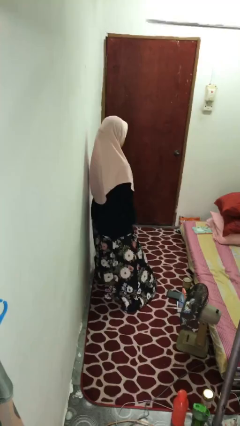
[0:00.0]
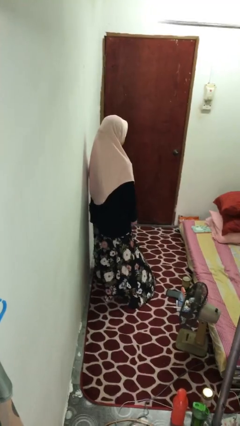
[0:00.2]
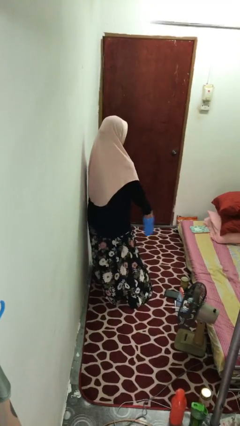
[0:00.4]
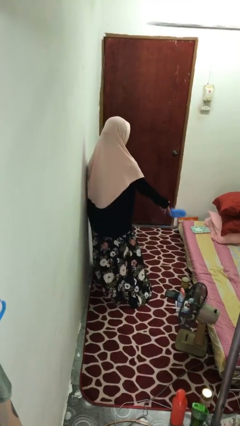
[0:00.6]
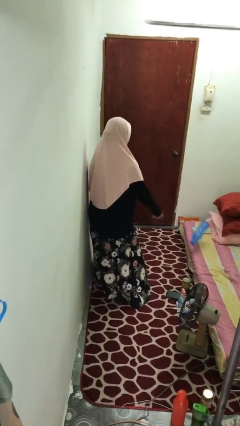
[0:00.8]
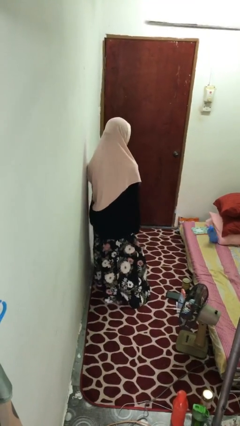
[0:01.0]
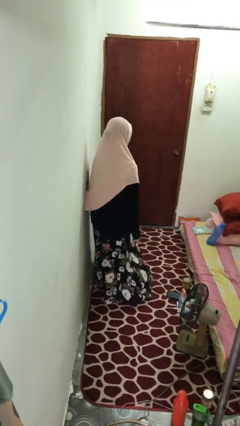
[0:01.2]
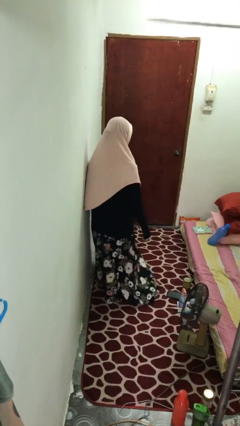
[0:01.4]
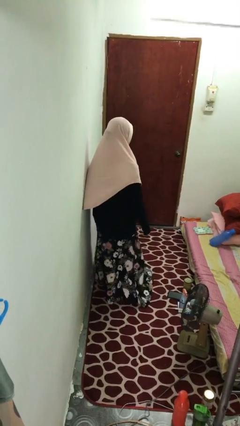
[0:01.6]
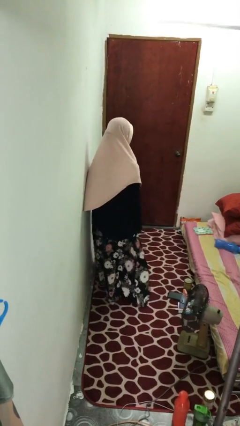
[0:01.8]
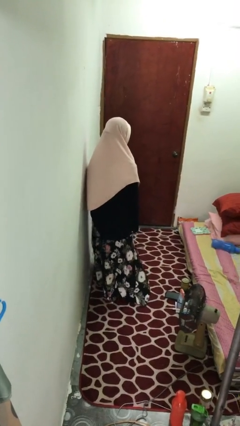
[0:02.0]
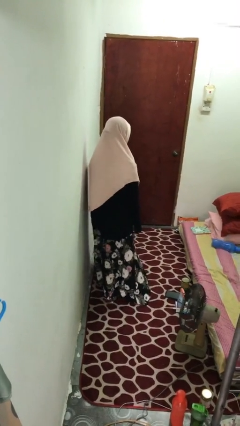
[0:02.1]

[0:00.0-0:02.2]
person throws object on bed

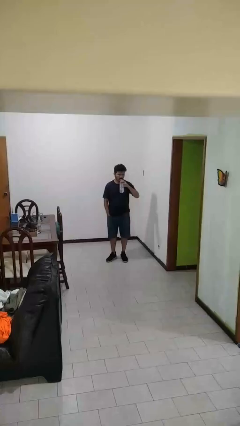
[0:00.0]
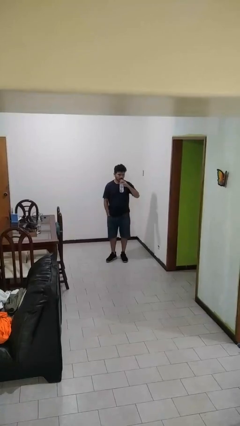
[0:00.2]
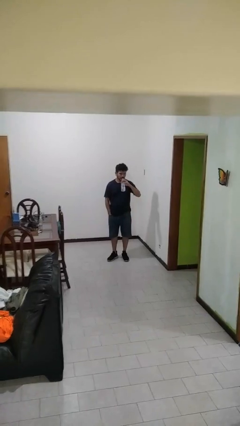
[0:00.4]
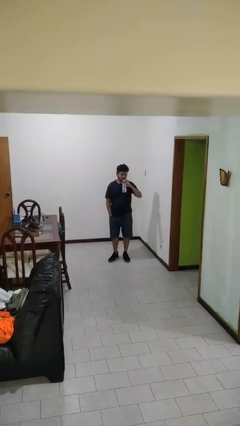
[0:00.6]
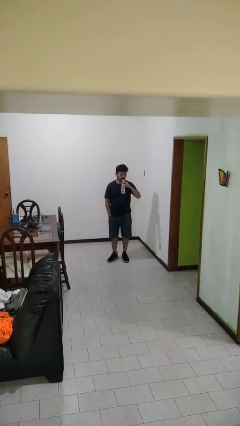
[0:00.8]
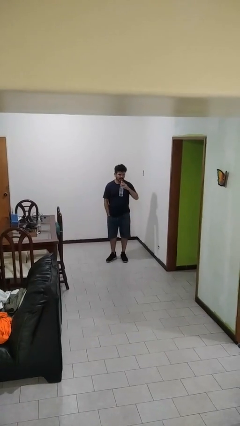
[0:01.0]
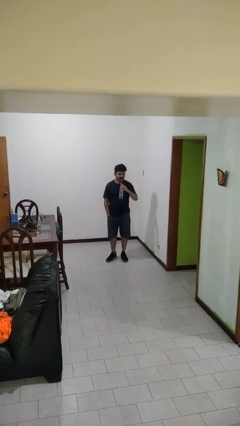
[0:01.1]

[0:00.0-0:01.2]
person drinks from straw

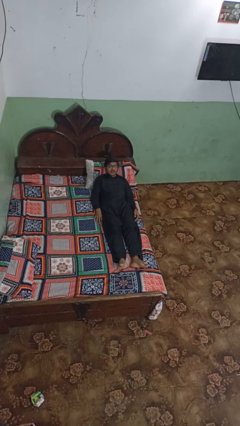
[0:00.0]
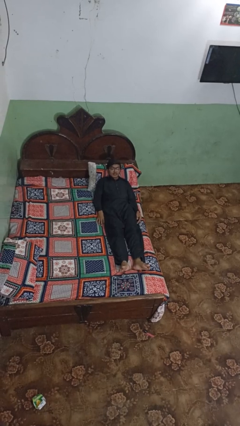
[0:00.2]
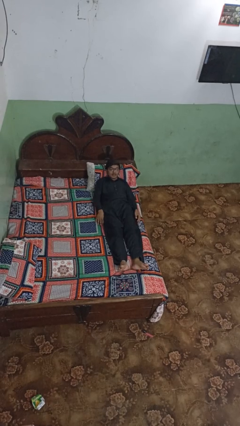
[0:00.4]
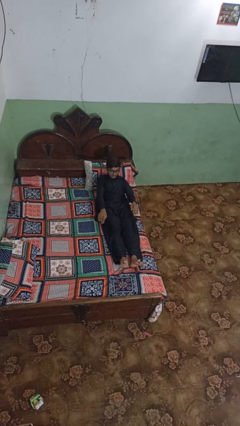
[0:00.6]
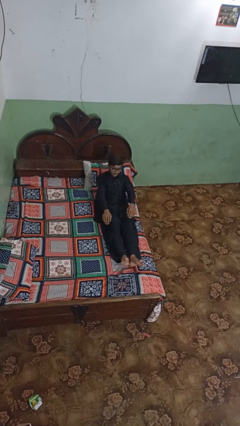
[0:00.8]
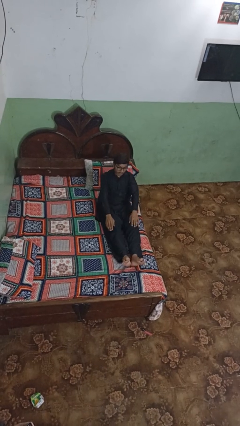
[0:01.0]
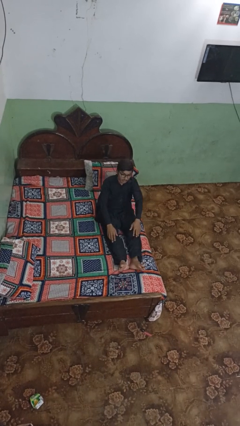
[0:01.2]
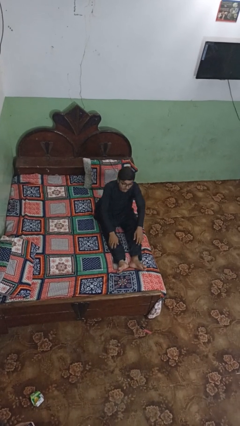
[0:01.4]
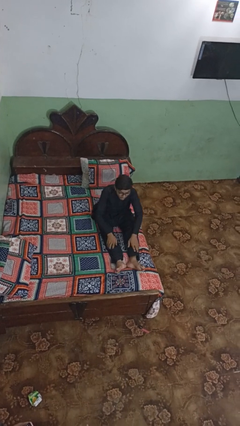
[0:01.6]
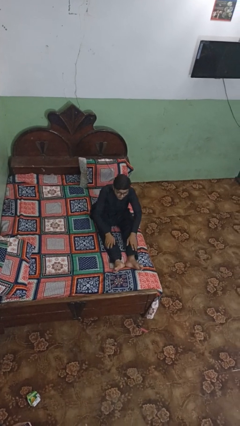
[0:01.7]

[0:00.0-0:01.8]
person stands up

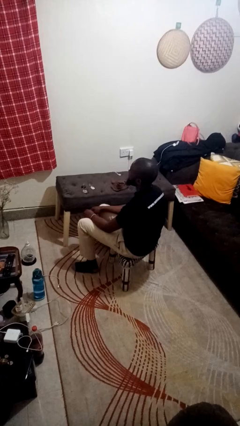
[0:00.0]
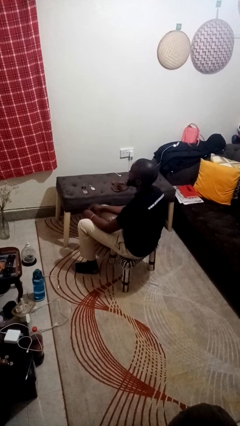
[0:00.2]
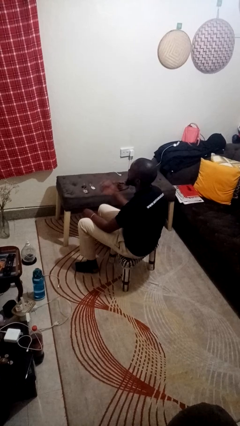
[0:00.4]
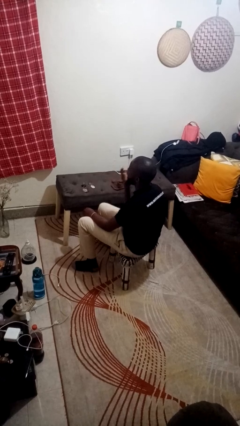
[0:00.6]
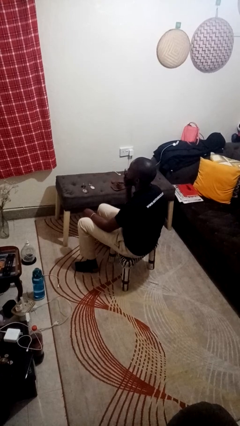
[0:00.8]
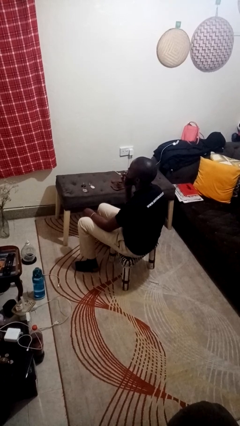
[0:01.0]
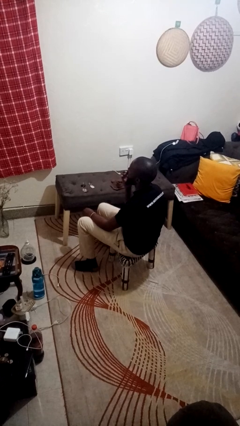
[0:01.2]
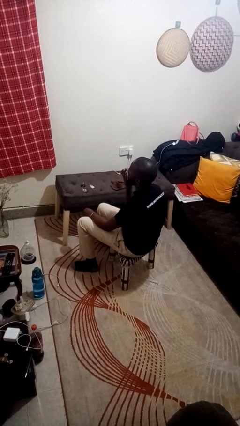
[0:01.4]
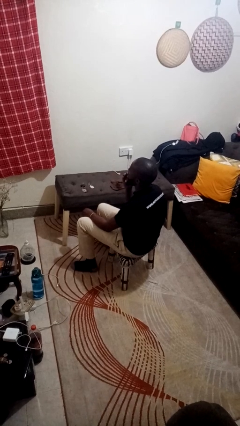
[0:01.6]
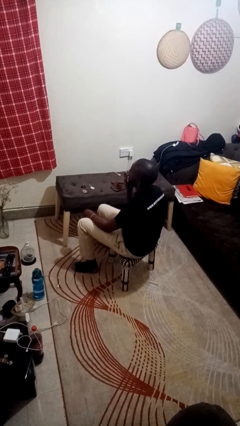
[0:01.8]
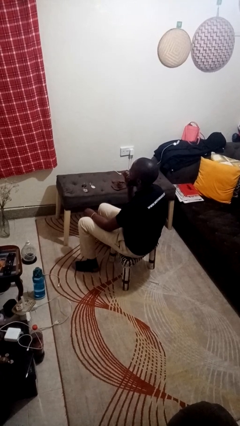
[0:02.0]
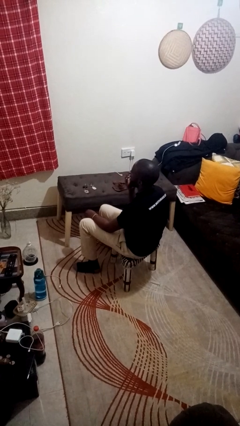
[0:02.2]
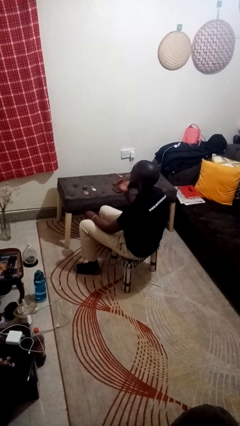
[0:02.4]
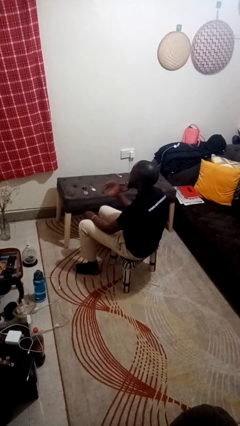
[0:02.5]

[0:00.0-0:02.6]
person licks fingers

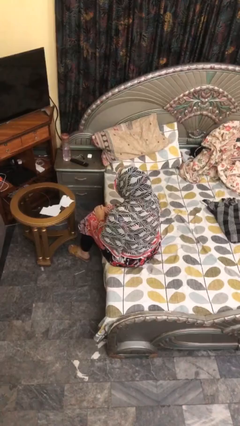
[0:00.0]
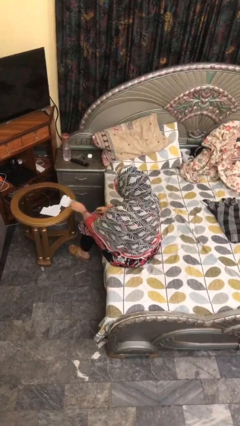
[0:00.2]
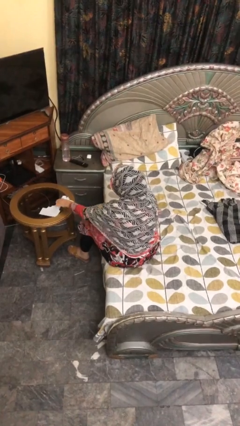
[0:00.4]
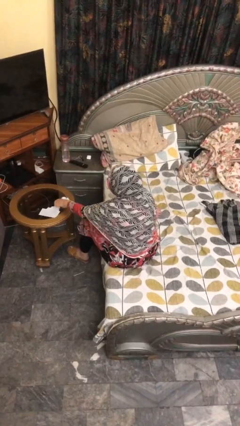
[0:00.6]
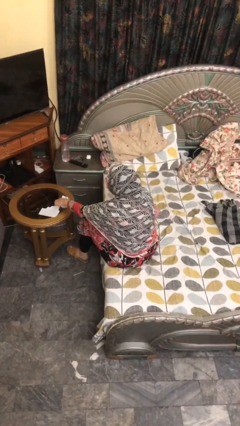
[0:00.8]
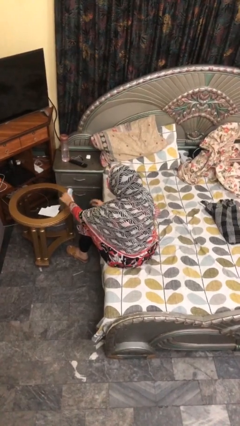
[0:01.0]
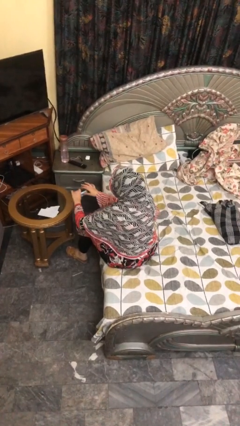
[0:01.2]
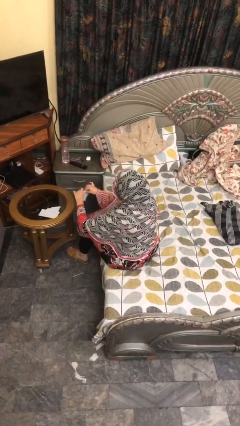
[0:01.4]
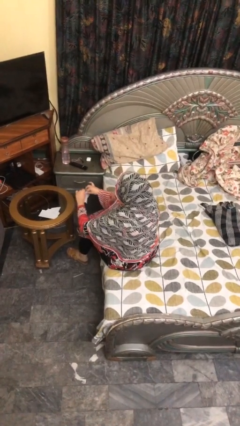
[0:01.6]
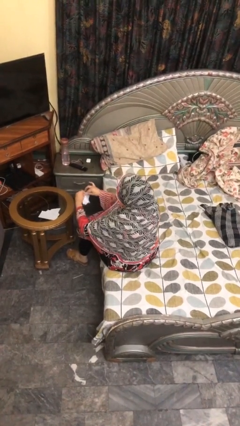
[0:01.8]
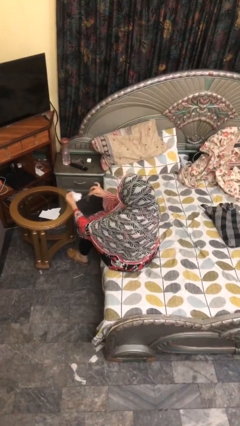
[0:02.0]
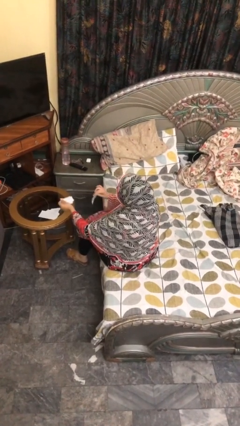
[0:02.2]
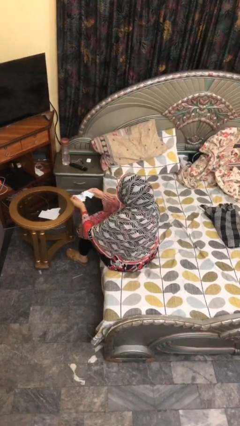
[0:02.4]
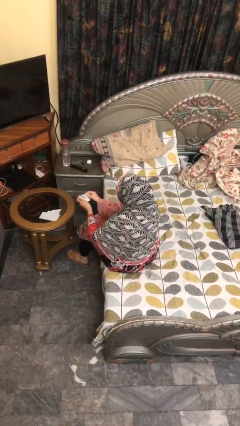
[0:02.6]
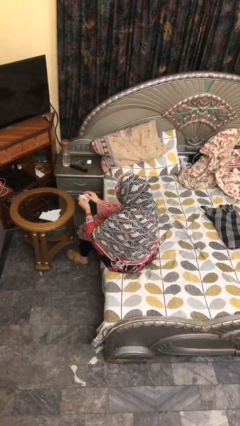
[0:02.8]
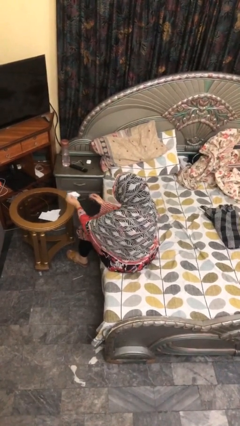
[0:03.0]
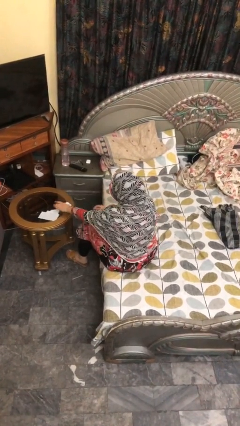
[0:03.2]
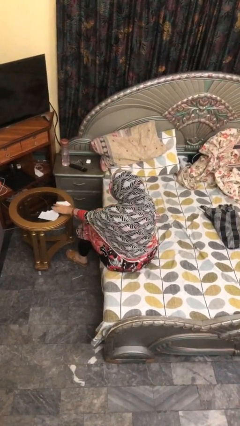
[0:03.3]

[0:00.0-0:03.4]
person tears paper

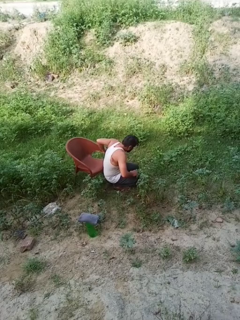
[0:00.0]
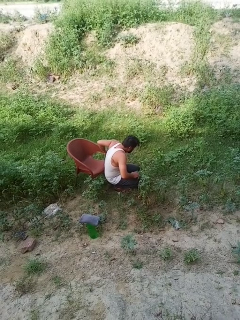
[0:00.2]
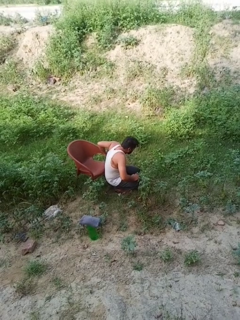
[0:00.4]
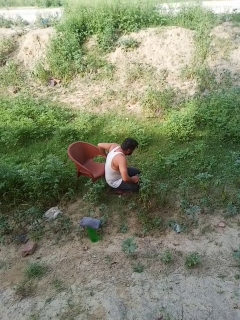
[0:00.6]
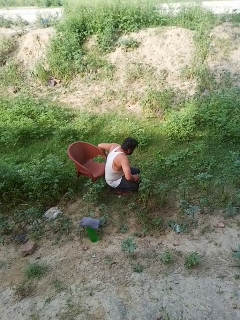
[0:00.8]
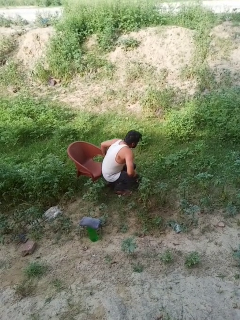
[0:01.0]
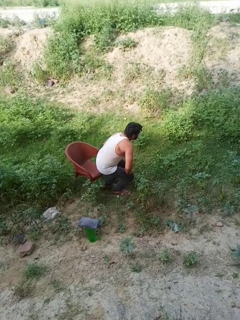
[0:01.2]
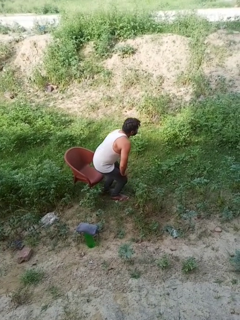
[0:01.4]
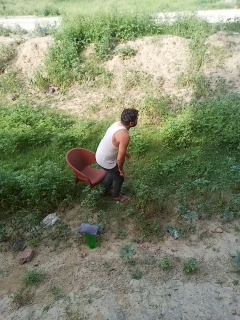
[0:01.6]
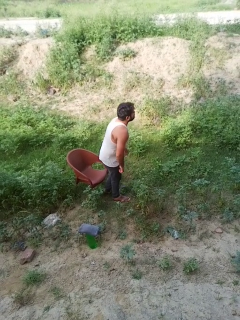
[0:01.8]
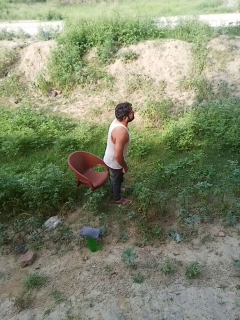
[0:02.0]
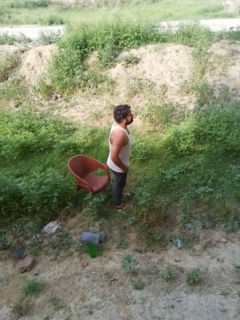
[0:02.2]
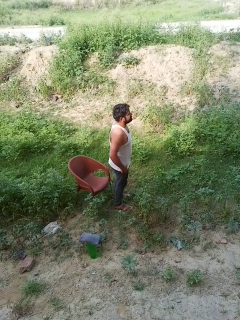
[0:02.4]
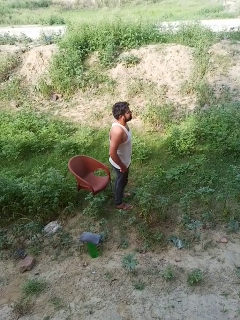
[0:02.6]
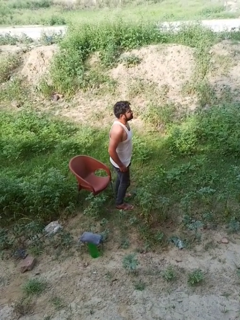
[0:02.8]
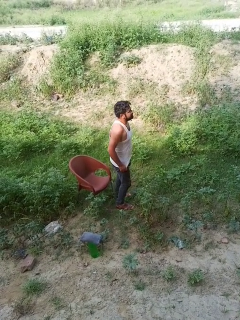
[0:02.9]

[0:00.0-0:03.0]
person stands up from floor

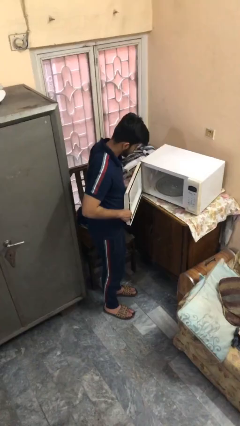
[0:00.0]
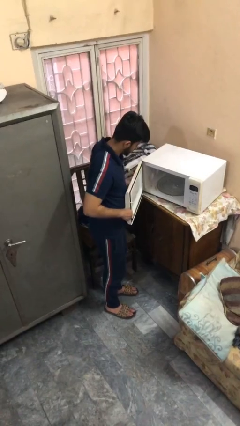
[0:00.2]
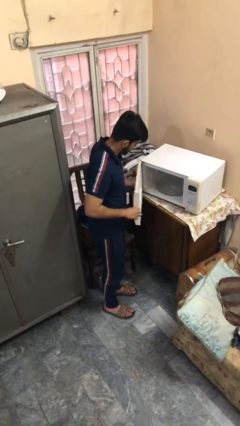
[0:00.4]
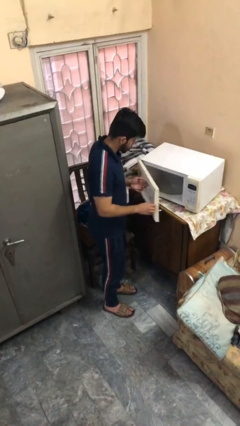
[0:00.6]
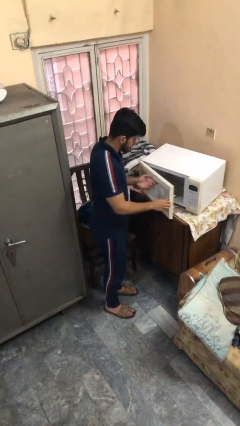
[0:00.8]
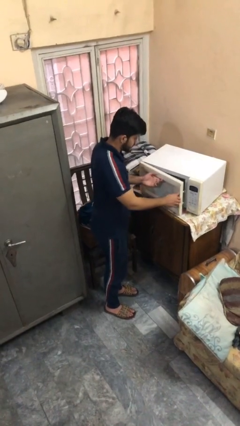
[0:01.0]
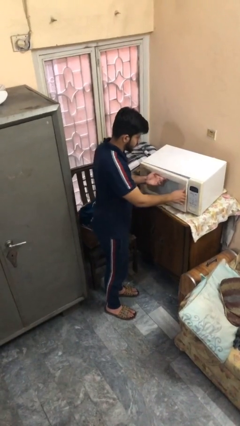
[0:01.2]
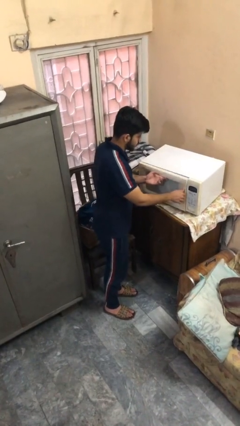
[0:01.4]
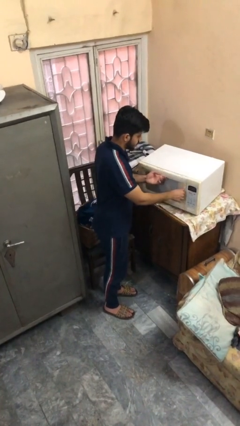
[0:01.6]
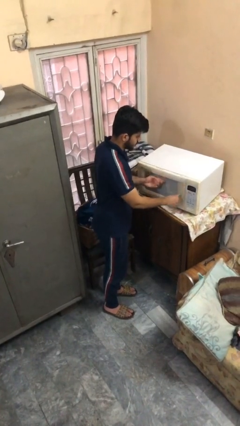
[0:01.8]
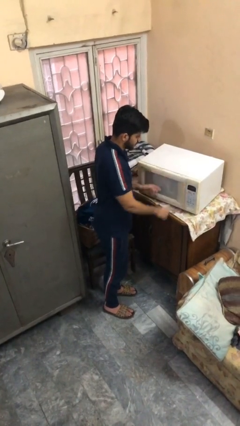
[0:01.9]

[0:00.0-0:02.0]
person closes microwave

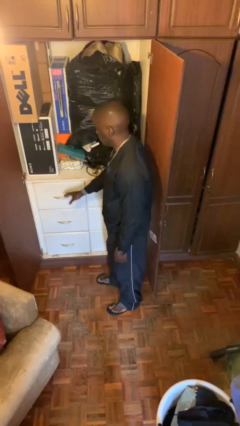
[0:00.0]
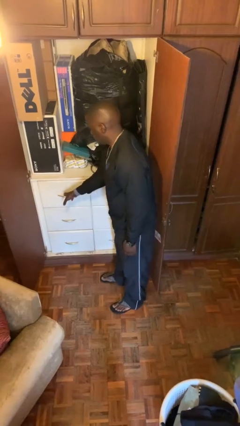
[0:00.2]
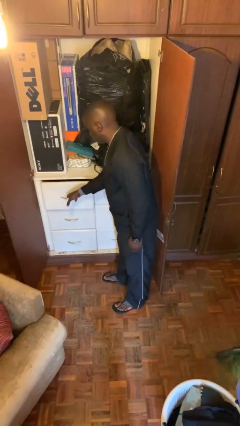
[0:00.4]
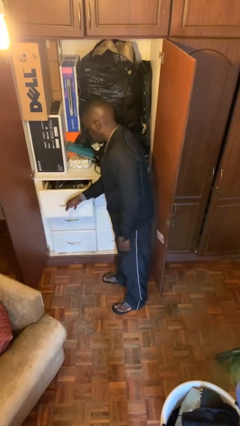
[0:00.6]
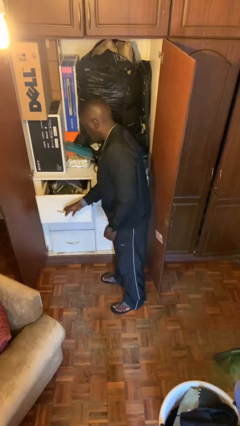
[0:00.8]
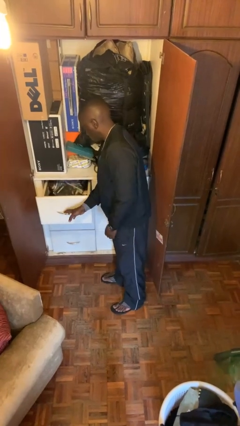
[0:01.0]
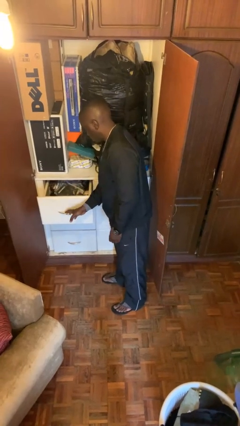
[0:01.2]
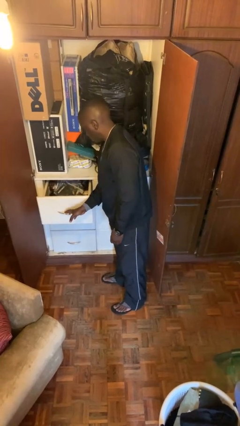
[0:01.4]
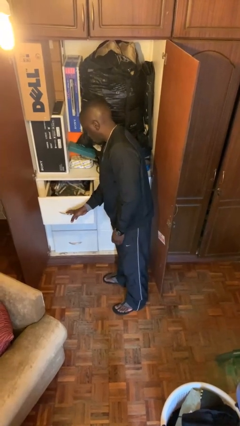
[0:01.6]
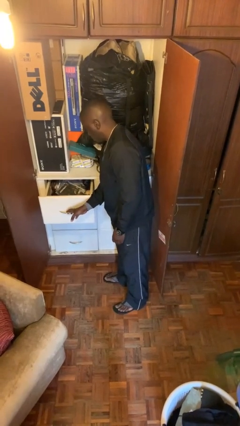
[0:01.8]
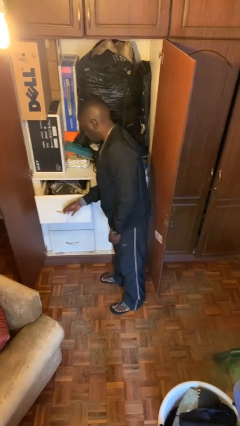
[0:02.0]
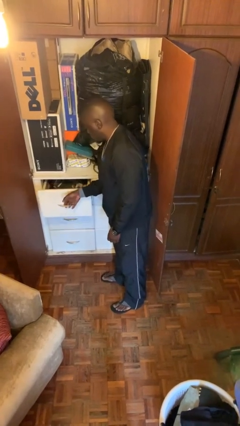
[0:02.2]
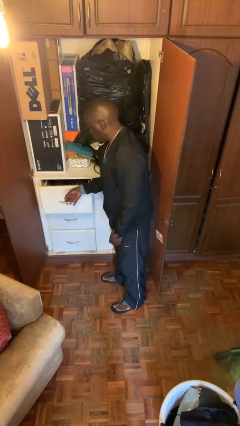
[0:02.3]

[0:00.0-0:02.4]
person opens dresser drawer
